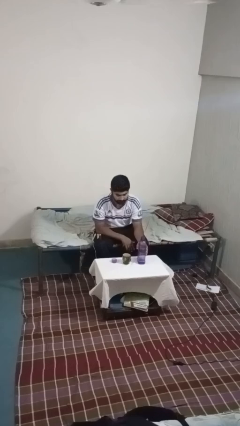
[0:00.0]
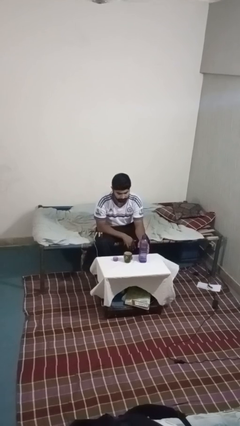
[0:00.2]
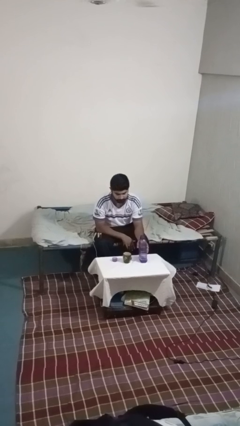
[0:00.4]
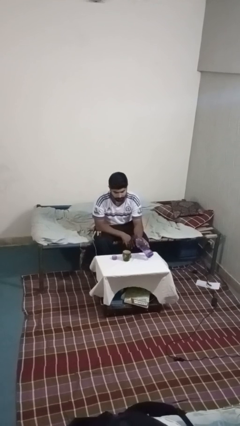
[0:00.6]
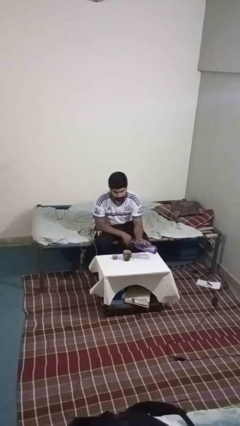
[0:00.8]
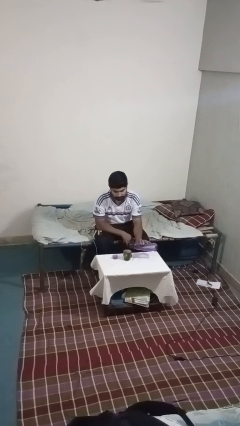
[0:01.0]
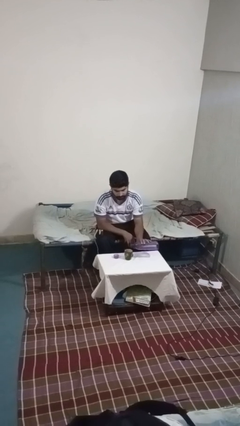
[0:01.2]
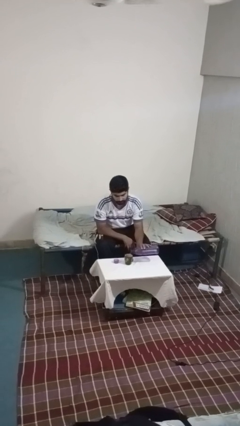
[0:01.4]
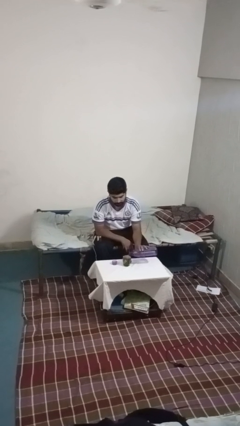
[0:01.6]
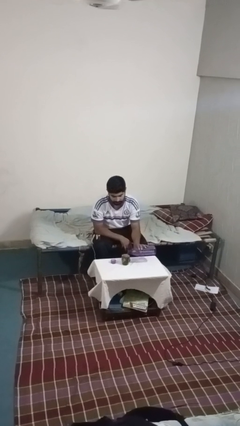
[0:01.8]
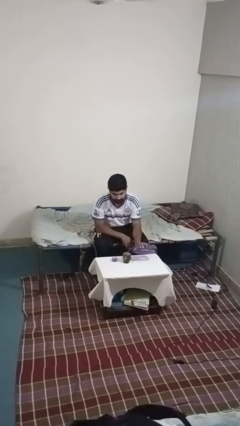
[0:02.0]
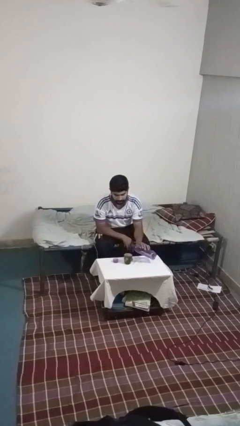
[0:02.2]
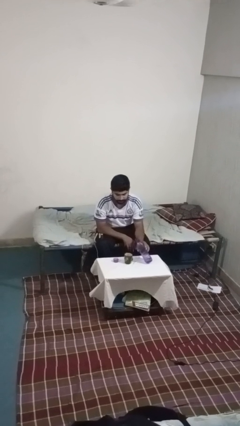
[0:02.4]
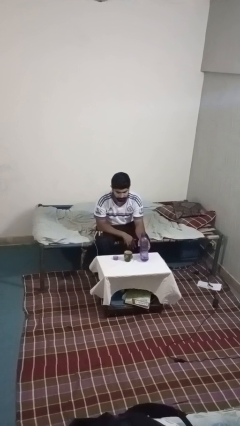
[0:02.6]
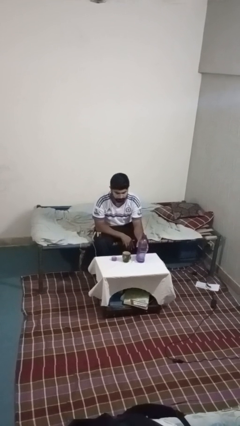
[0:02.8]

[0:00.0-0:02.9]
person pours liquid into cup

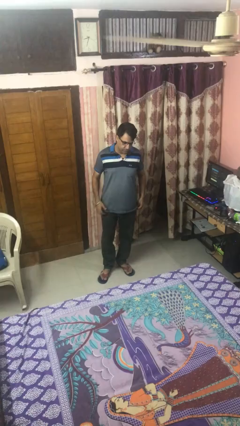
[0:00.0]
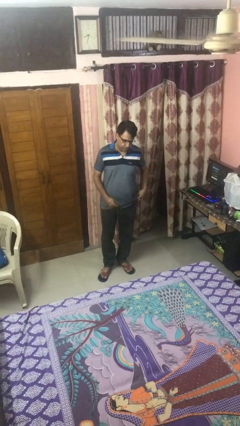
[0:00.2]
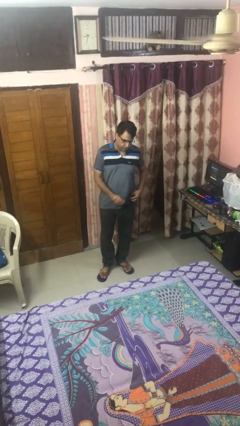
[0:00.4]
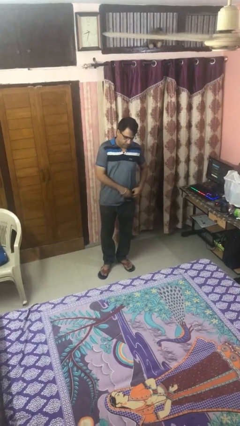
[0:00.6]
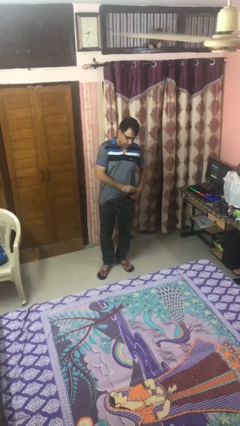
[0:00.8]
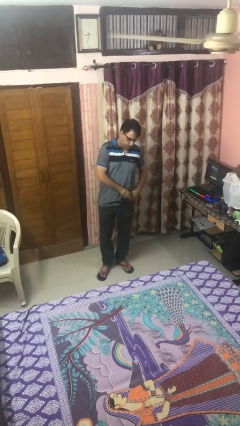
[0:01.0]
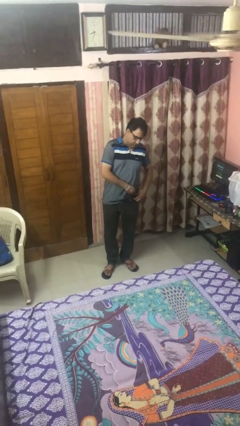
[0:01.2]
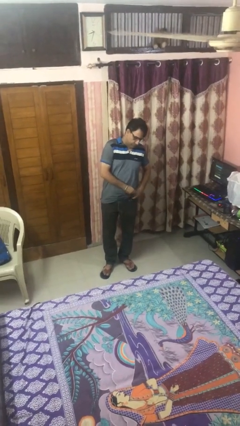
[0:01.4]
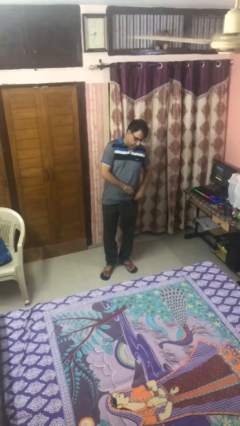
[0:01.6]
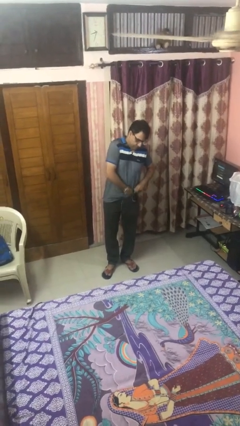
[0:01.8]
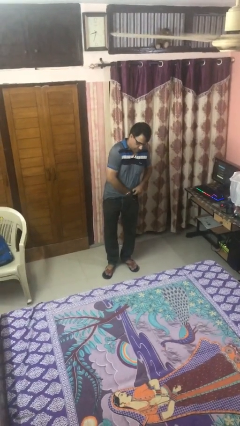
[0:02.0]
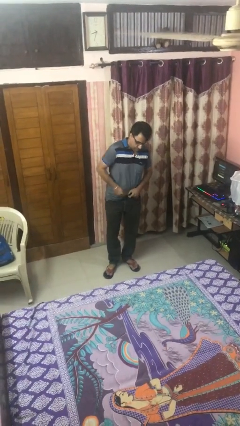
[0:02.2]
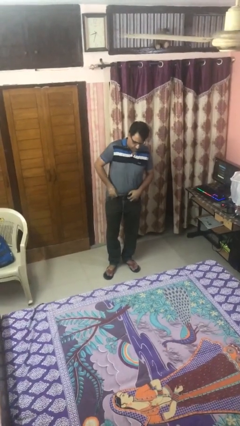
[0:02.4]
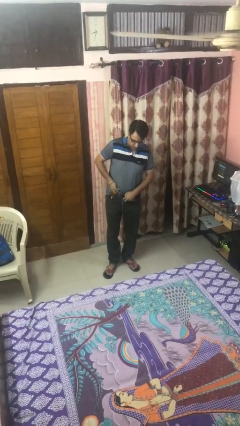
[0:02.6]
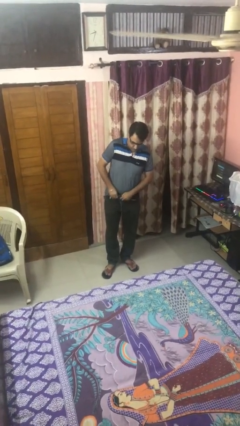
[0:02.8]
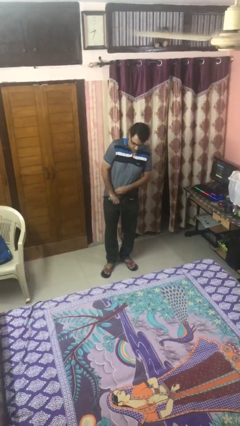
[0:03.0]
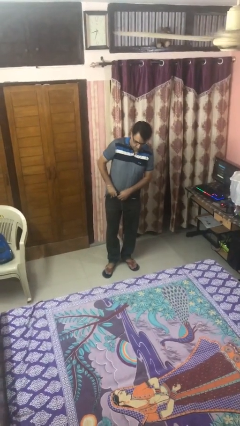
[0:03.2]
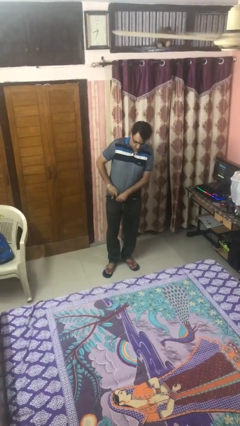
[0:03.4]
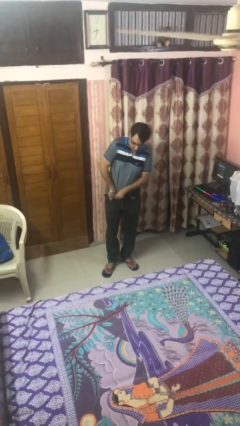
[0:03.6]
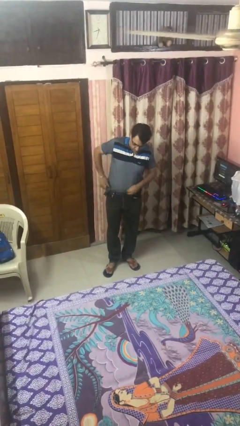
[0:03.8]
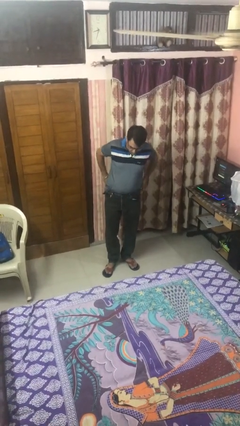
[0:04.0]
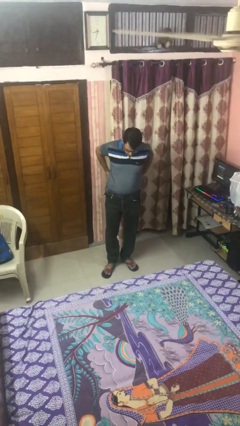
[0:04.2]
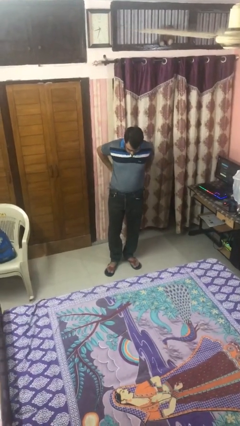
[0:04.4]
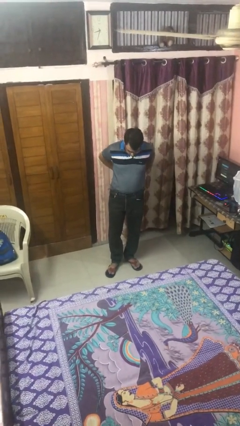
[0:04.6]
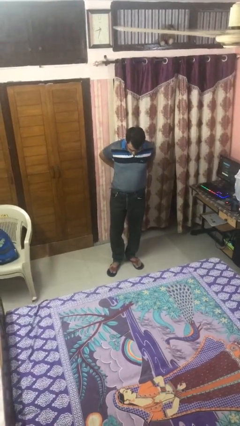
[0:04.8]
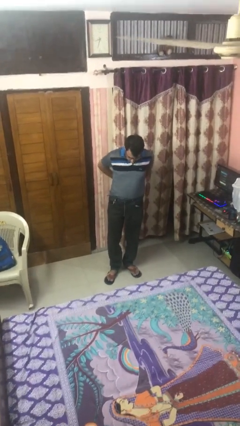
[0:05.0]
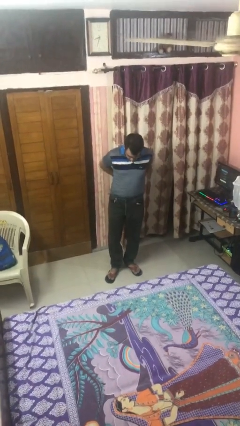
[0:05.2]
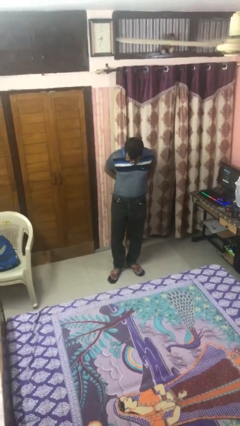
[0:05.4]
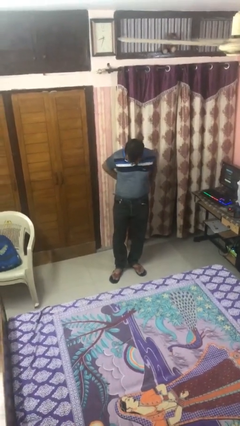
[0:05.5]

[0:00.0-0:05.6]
person tucks in shirt

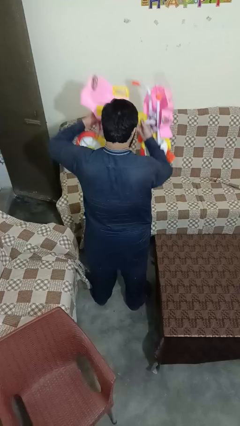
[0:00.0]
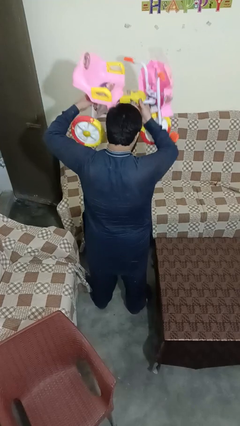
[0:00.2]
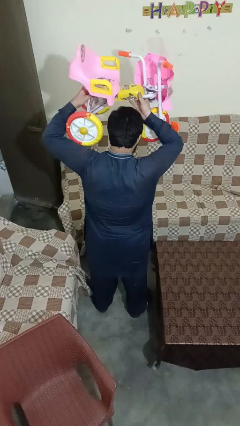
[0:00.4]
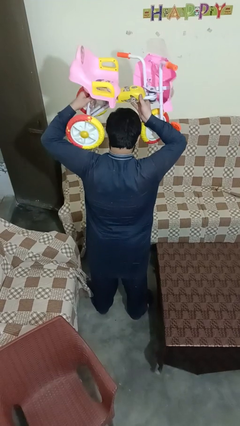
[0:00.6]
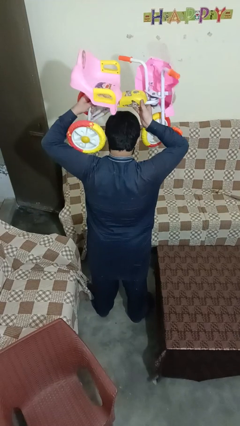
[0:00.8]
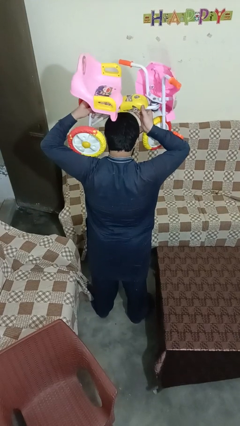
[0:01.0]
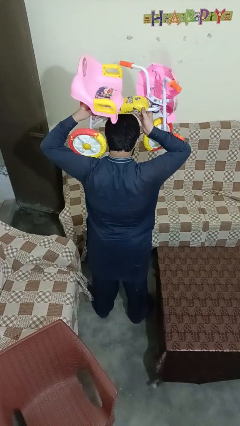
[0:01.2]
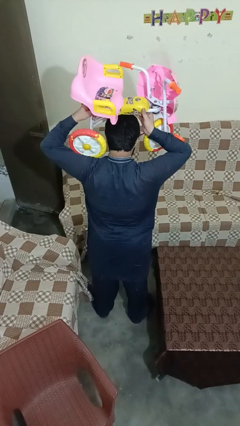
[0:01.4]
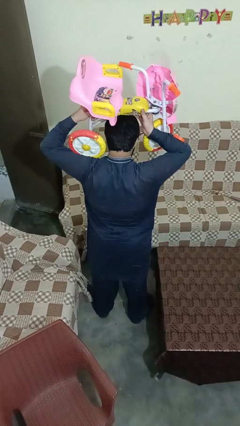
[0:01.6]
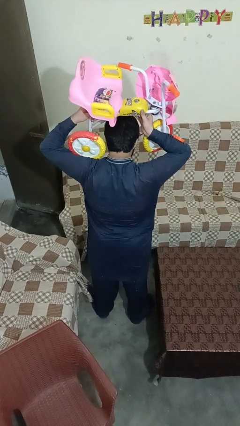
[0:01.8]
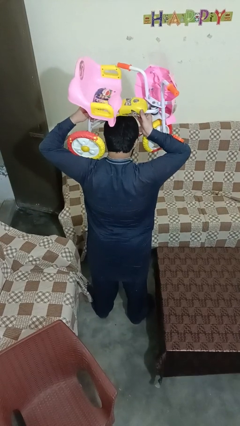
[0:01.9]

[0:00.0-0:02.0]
person holds object above head

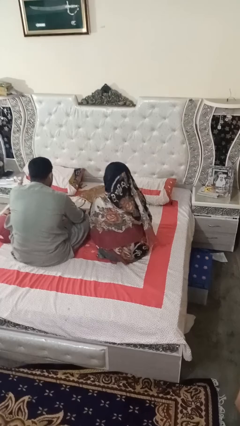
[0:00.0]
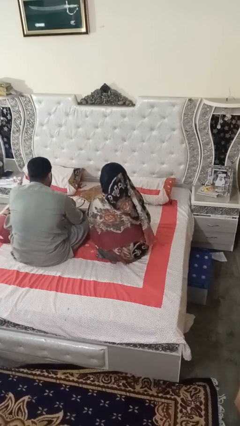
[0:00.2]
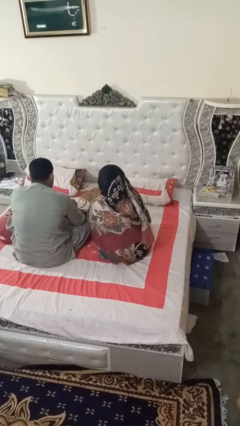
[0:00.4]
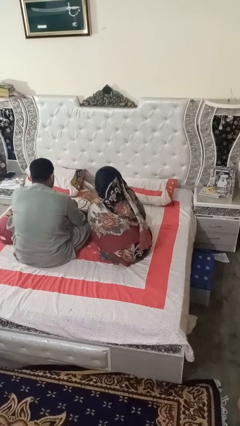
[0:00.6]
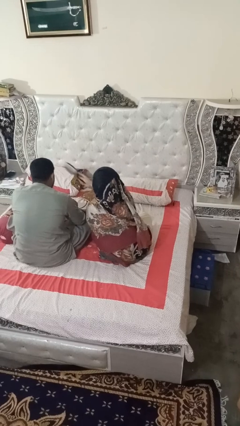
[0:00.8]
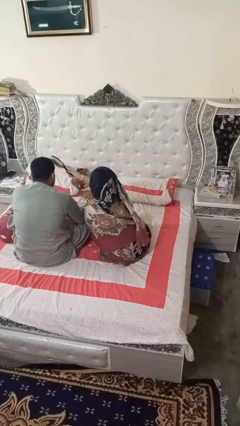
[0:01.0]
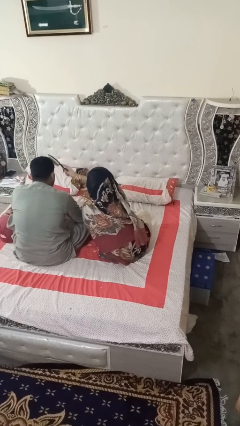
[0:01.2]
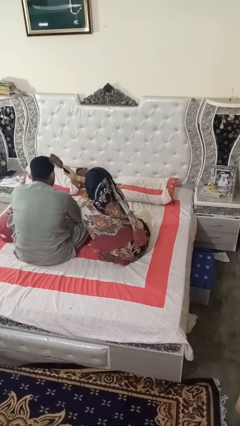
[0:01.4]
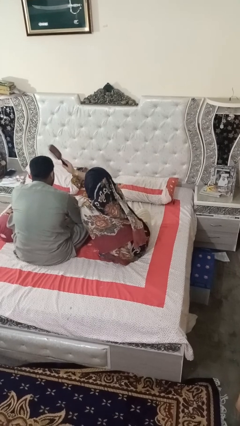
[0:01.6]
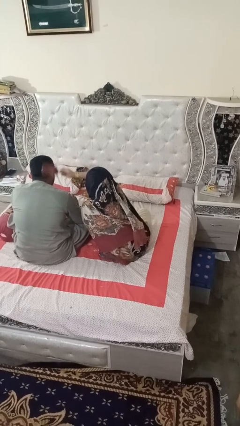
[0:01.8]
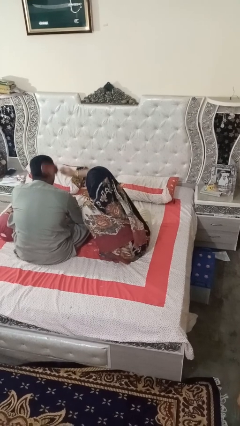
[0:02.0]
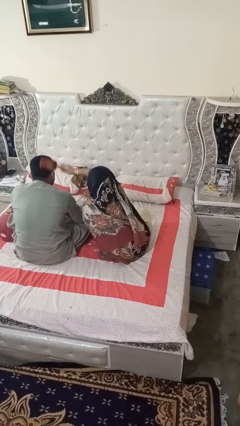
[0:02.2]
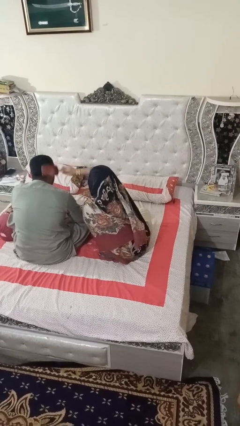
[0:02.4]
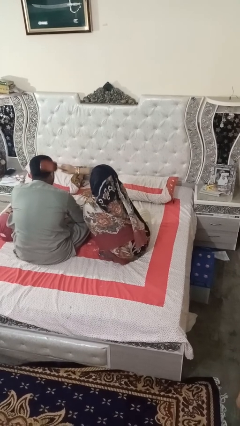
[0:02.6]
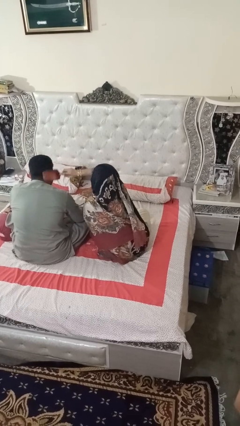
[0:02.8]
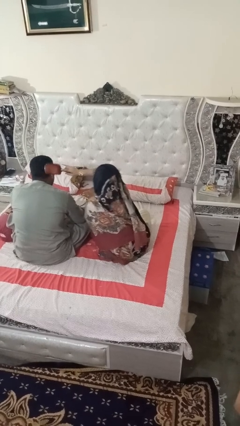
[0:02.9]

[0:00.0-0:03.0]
person brushes hair of person

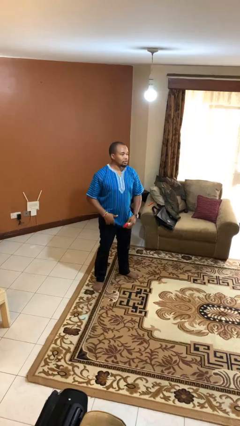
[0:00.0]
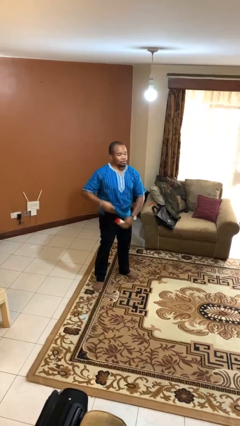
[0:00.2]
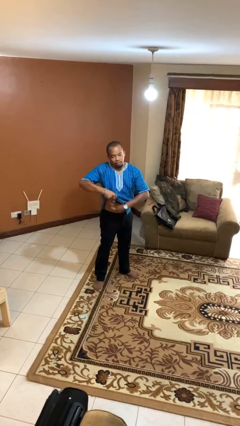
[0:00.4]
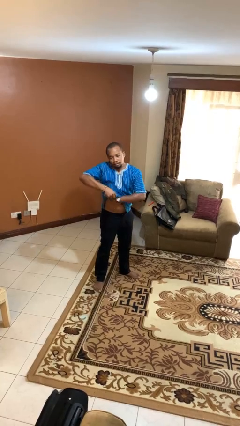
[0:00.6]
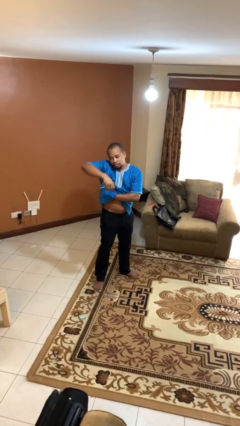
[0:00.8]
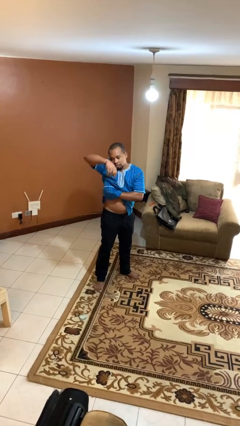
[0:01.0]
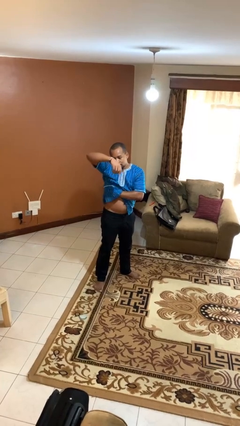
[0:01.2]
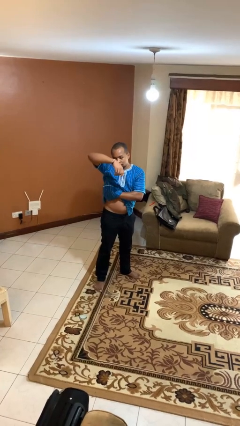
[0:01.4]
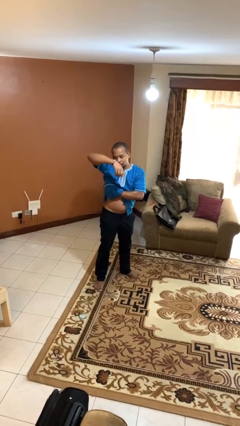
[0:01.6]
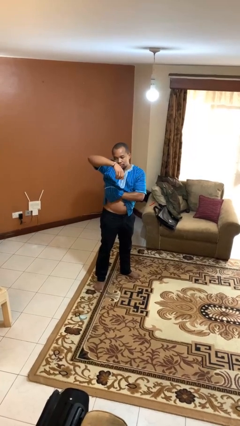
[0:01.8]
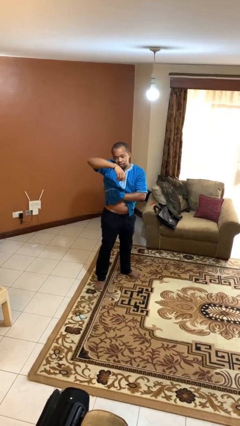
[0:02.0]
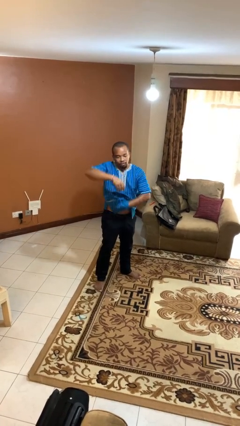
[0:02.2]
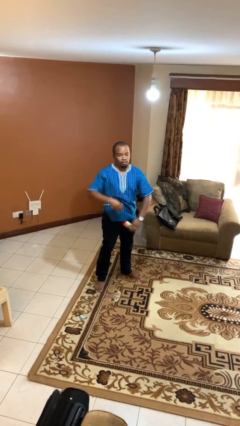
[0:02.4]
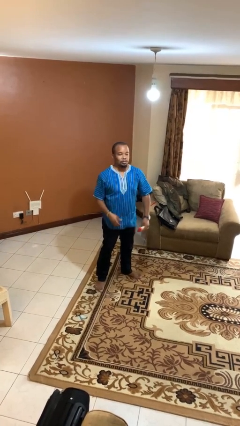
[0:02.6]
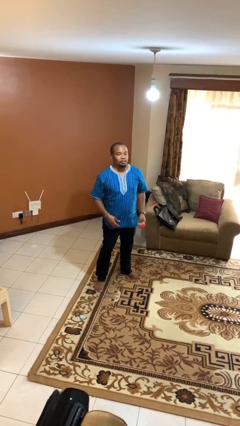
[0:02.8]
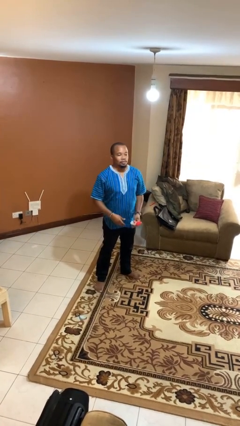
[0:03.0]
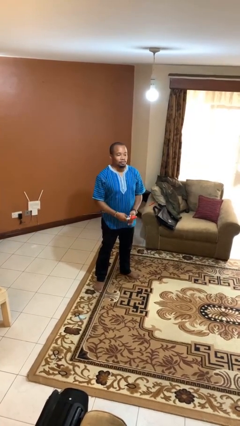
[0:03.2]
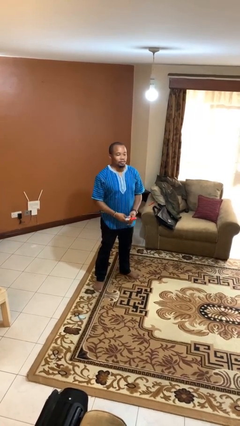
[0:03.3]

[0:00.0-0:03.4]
person applies deodorant

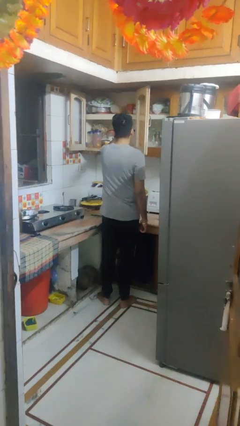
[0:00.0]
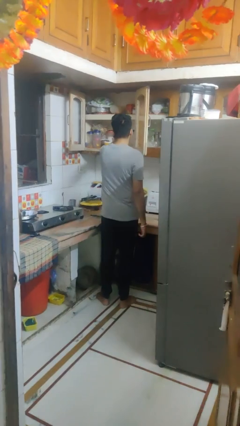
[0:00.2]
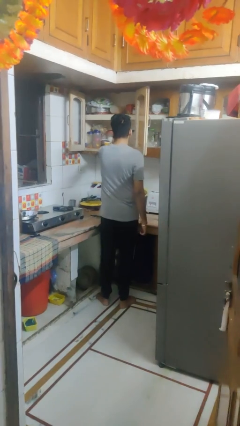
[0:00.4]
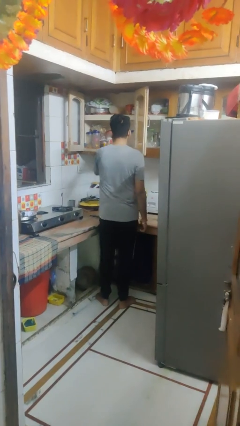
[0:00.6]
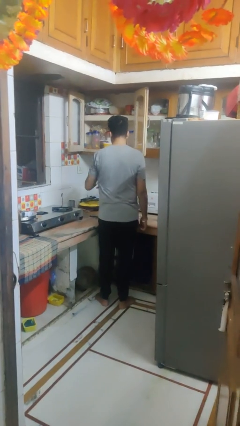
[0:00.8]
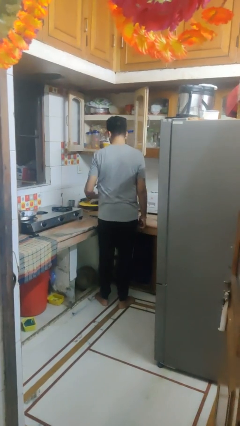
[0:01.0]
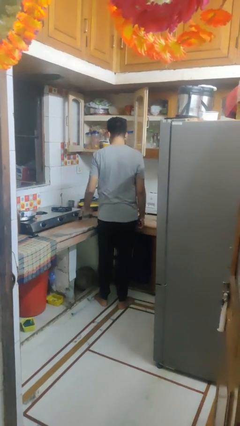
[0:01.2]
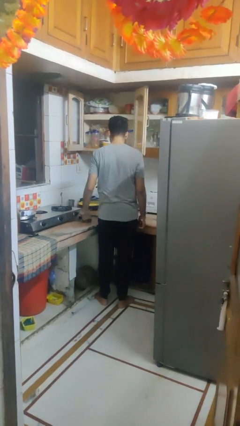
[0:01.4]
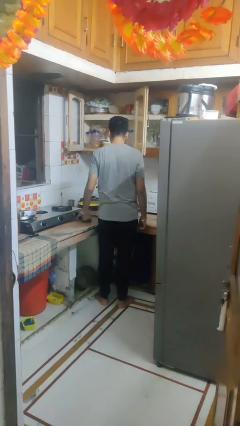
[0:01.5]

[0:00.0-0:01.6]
person takes object from cabinet
